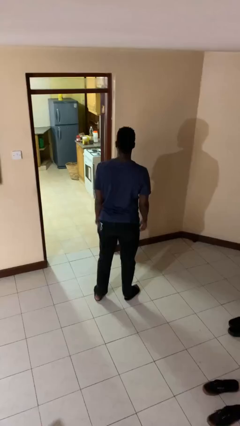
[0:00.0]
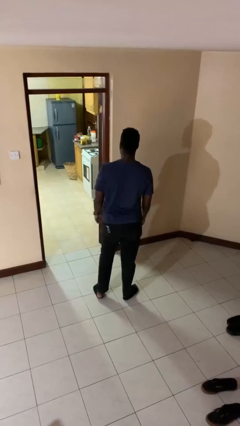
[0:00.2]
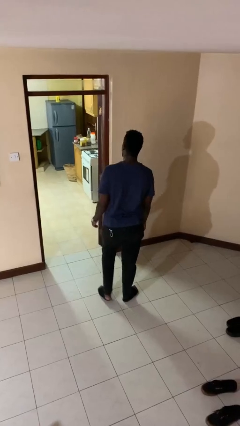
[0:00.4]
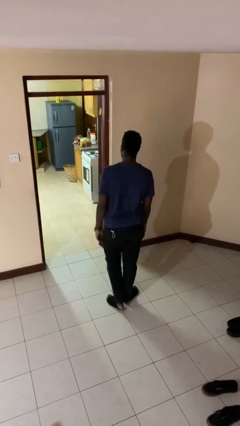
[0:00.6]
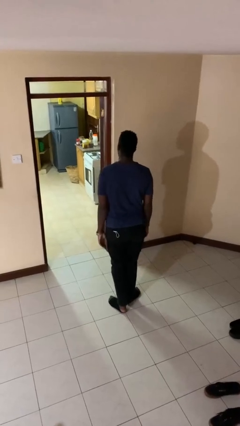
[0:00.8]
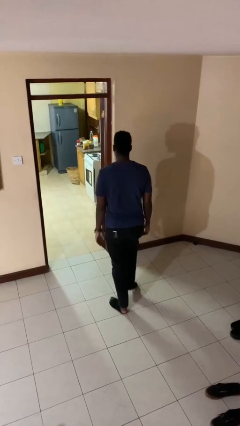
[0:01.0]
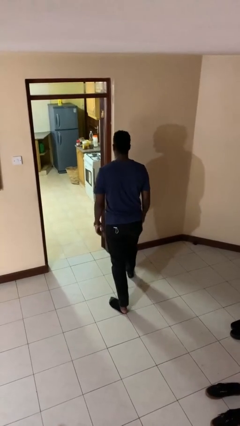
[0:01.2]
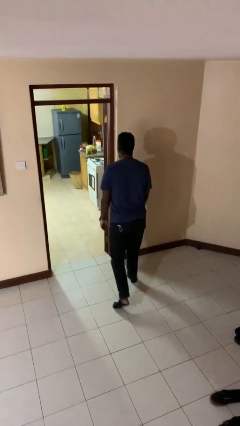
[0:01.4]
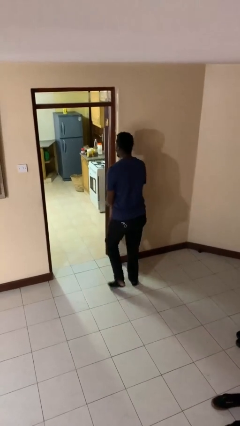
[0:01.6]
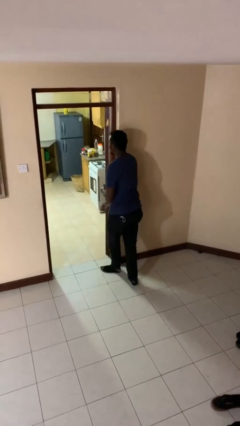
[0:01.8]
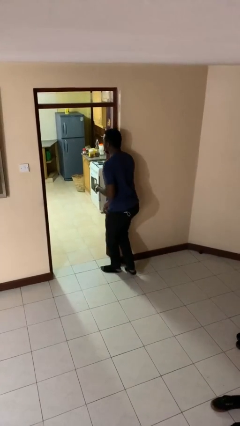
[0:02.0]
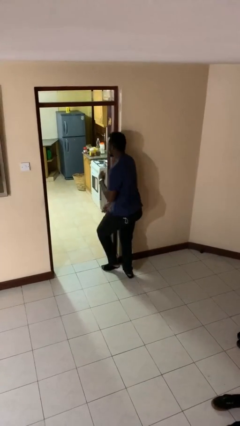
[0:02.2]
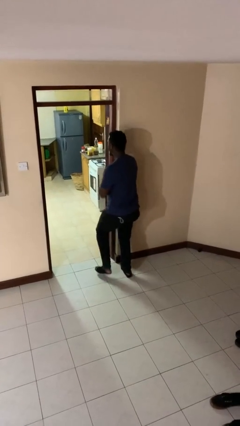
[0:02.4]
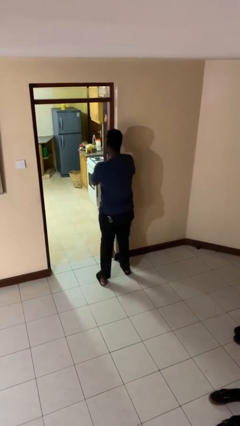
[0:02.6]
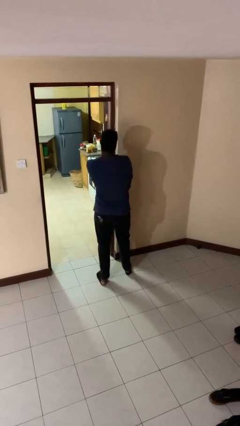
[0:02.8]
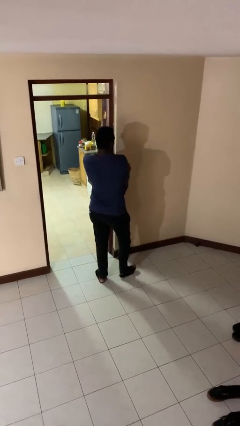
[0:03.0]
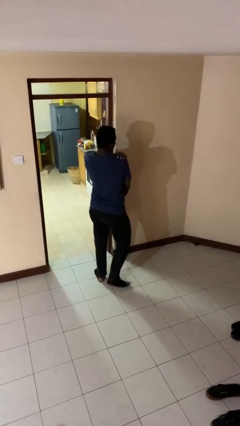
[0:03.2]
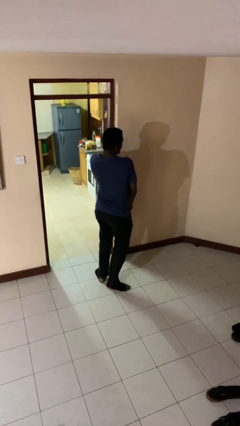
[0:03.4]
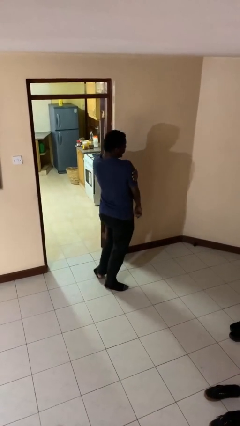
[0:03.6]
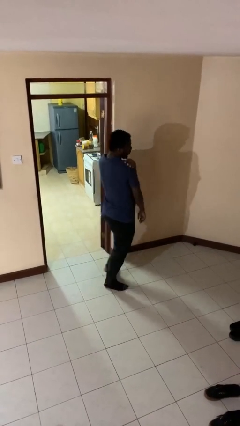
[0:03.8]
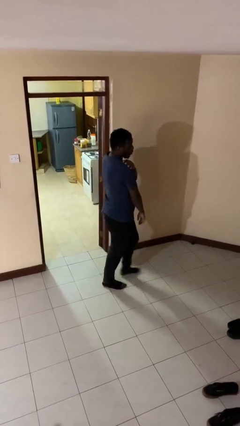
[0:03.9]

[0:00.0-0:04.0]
person bumps into wall

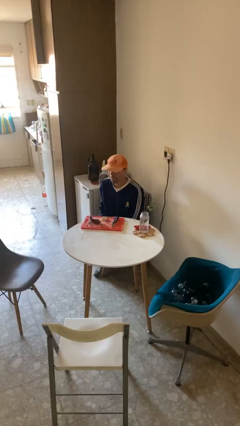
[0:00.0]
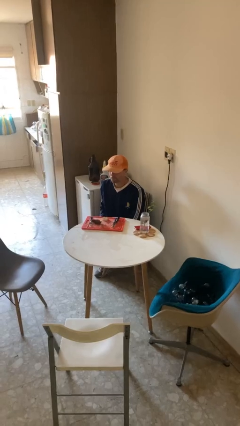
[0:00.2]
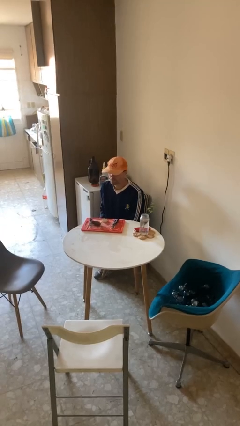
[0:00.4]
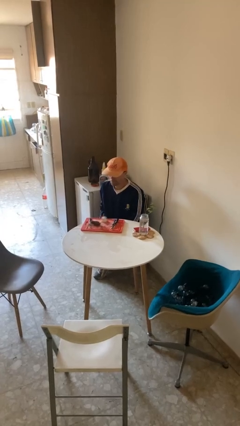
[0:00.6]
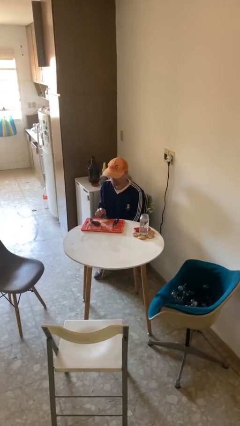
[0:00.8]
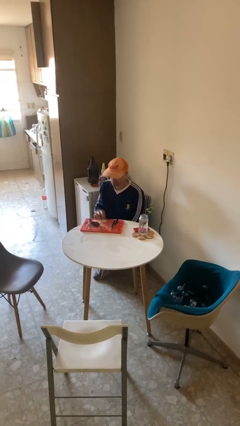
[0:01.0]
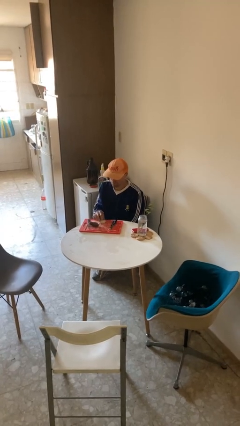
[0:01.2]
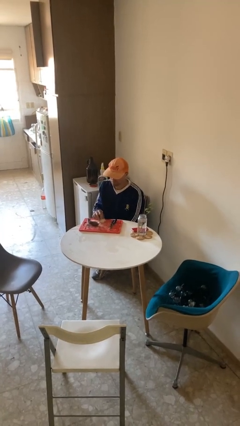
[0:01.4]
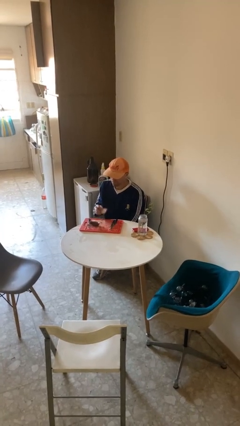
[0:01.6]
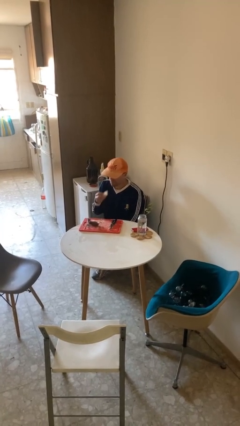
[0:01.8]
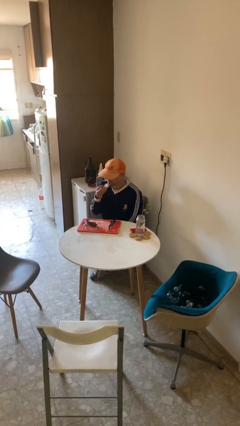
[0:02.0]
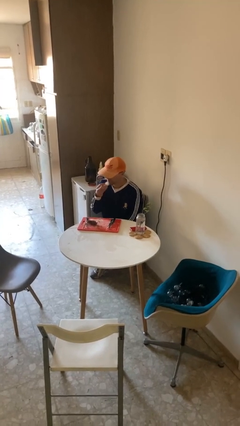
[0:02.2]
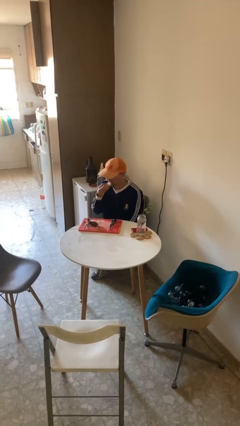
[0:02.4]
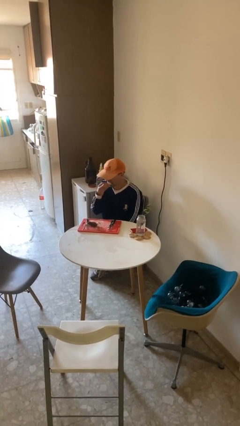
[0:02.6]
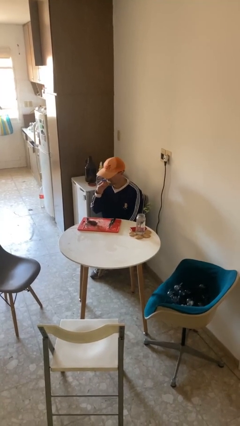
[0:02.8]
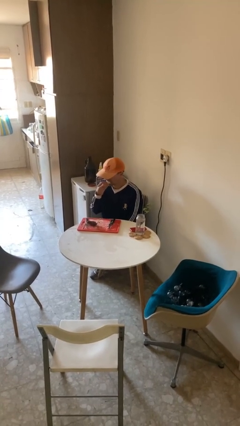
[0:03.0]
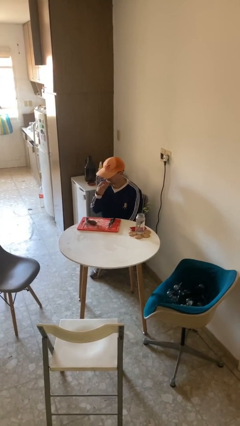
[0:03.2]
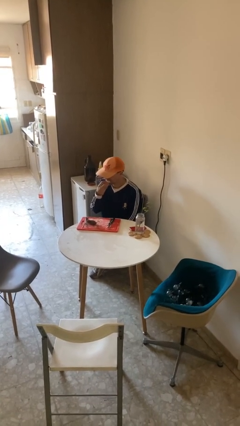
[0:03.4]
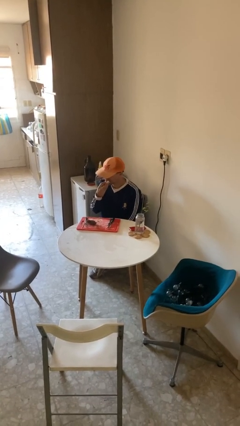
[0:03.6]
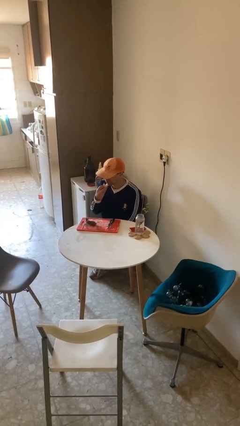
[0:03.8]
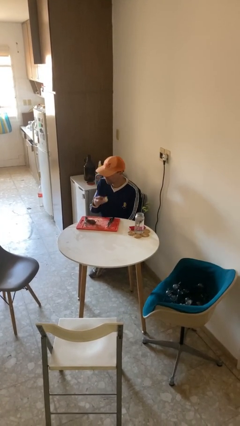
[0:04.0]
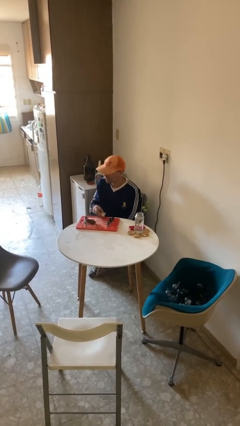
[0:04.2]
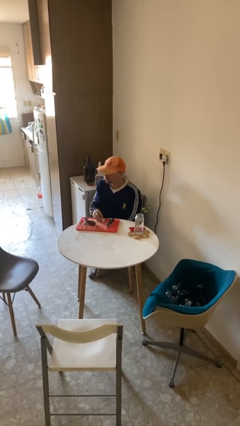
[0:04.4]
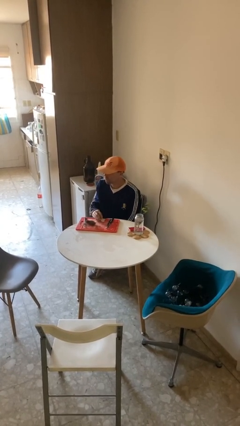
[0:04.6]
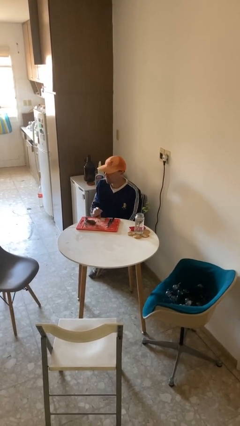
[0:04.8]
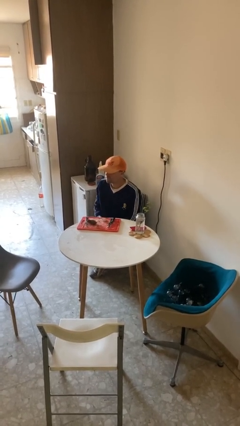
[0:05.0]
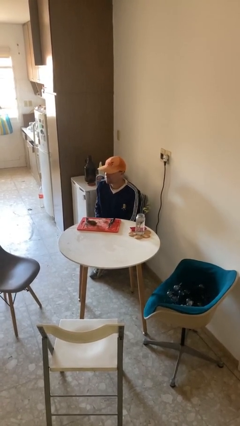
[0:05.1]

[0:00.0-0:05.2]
person eats with hands

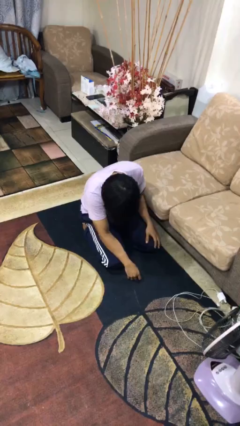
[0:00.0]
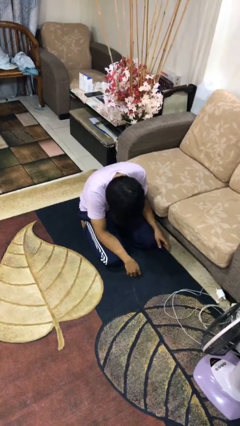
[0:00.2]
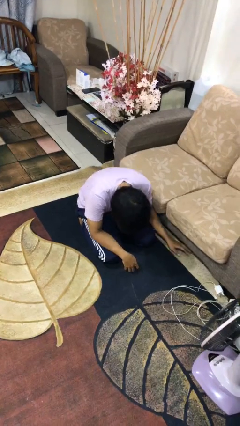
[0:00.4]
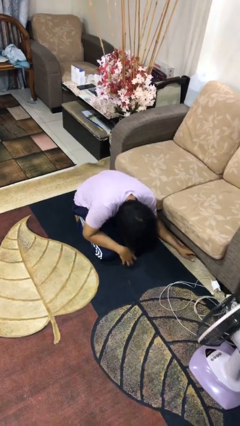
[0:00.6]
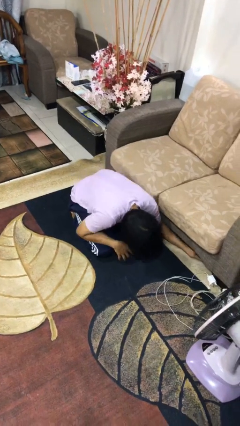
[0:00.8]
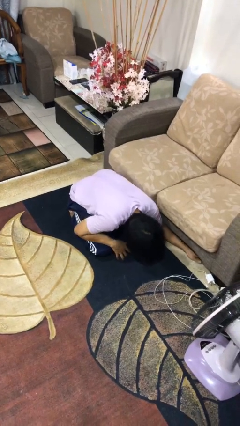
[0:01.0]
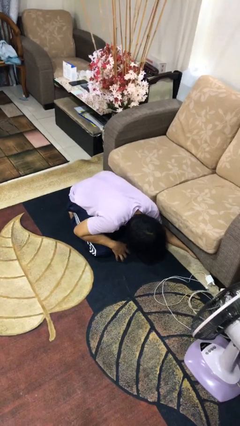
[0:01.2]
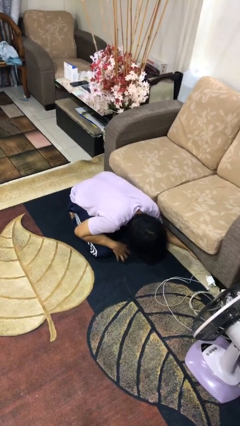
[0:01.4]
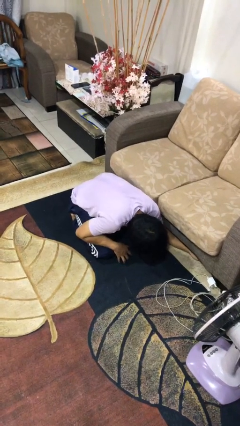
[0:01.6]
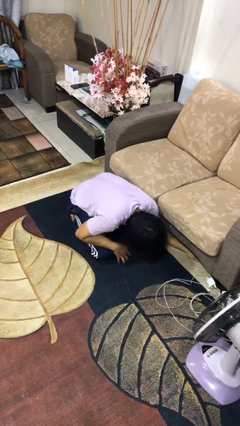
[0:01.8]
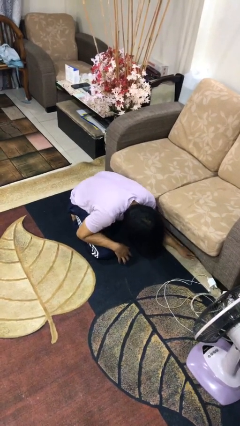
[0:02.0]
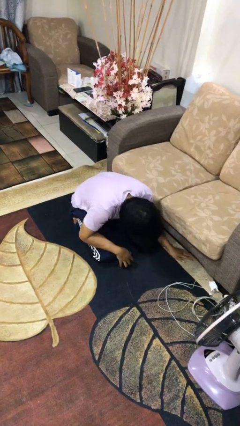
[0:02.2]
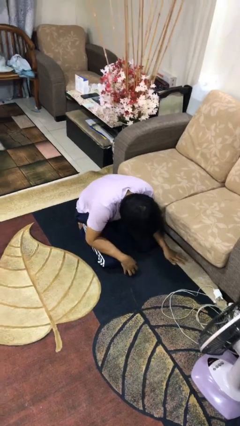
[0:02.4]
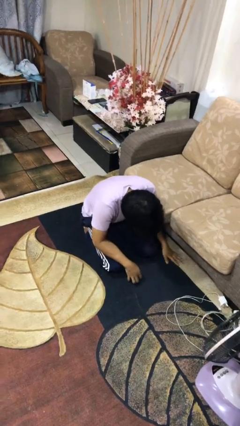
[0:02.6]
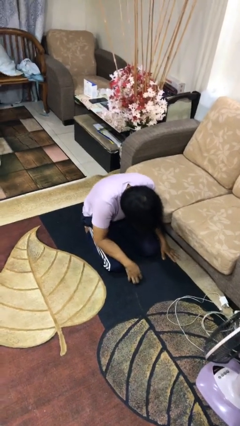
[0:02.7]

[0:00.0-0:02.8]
person searches under couch

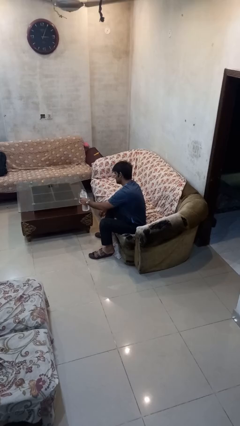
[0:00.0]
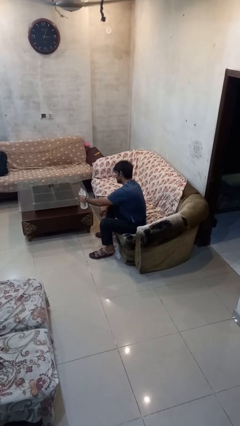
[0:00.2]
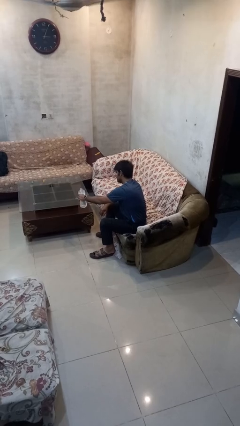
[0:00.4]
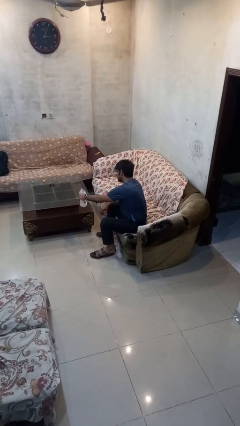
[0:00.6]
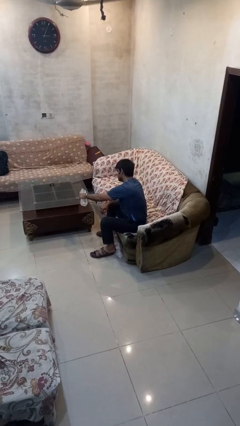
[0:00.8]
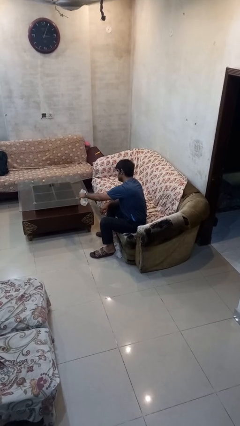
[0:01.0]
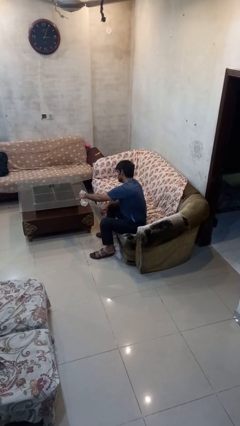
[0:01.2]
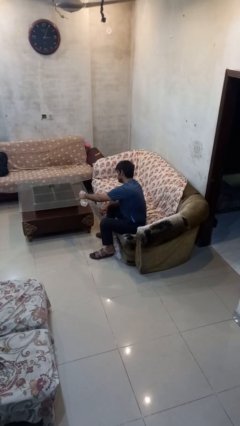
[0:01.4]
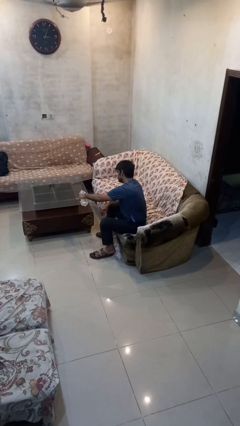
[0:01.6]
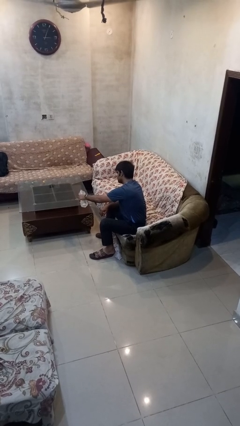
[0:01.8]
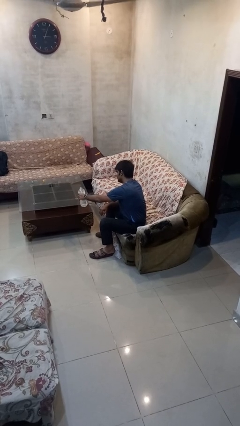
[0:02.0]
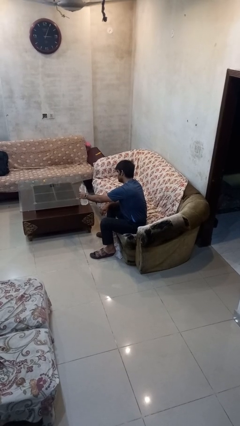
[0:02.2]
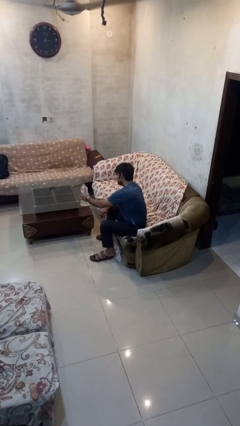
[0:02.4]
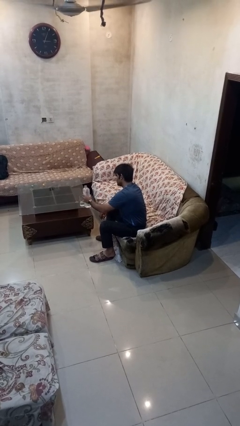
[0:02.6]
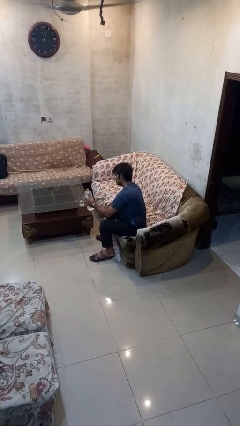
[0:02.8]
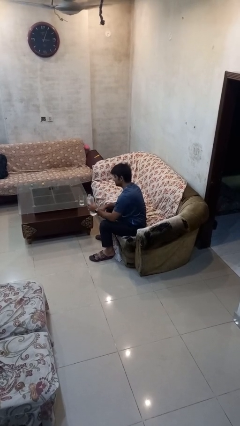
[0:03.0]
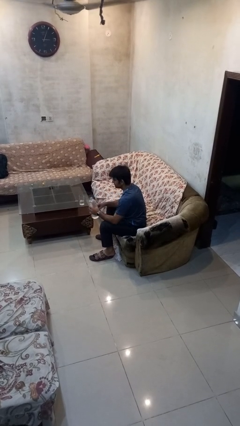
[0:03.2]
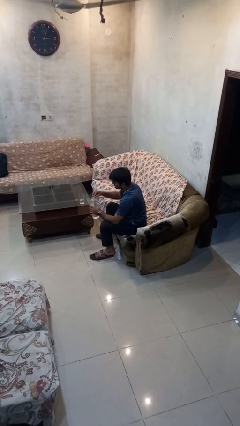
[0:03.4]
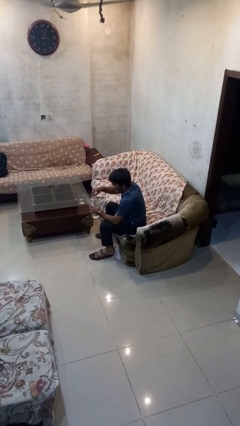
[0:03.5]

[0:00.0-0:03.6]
person pours liquid into cup

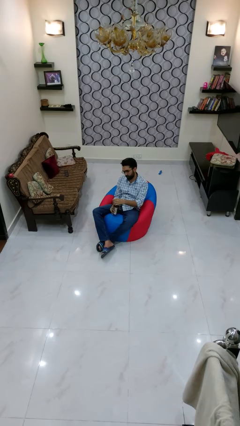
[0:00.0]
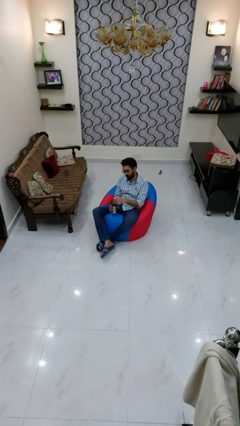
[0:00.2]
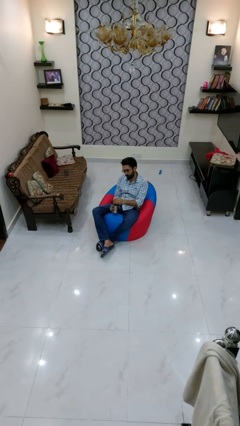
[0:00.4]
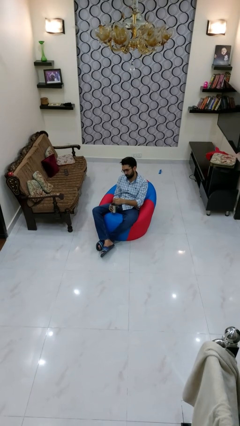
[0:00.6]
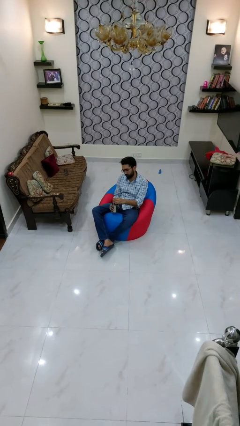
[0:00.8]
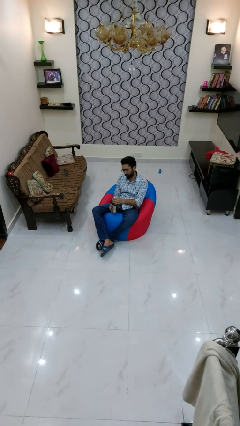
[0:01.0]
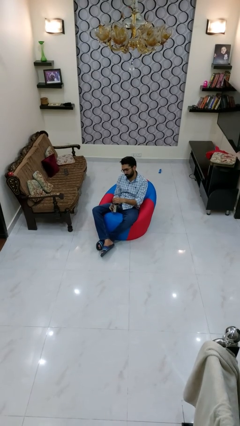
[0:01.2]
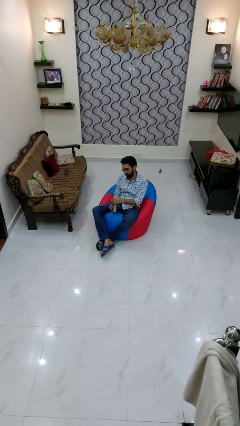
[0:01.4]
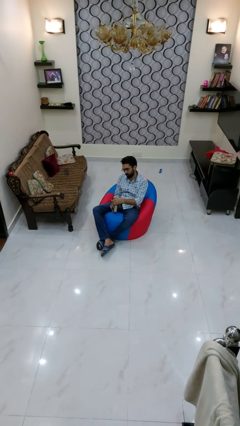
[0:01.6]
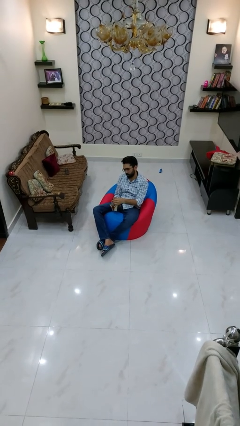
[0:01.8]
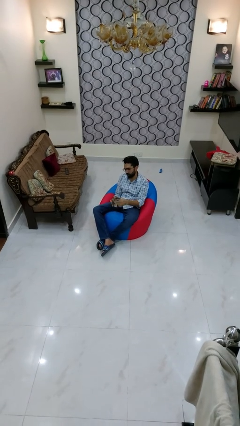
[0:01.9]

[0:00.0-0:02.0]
person stirs mug
